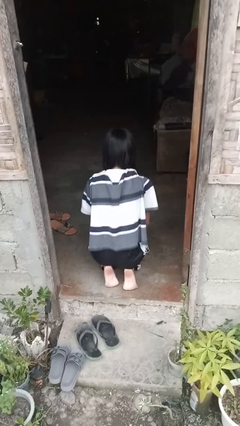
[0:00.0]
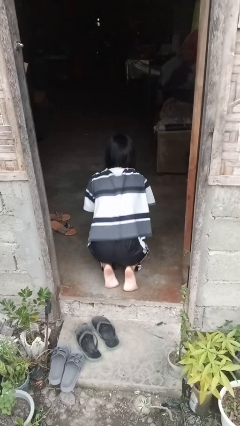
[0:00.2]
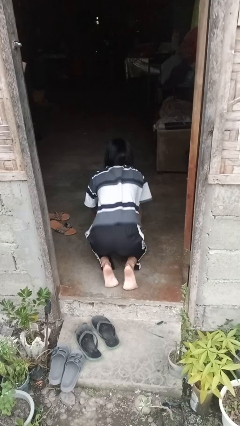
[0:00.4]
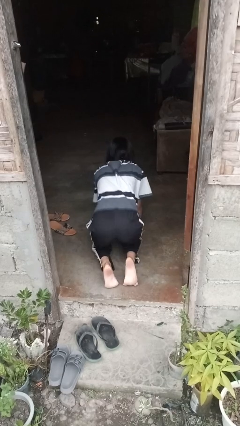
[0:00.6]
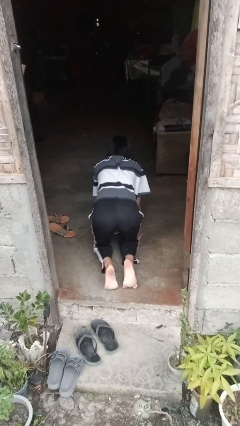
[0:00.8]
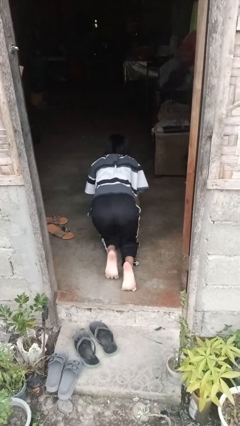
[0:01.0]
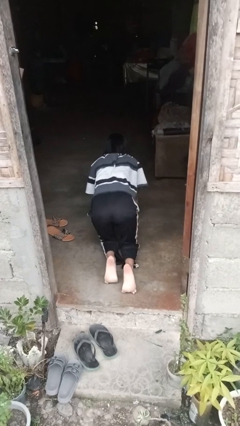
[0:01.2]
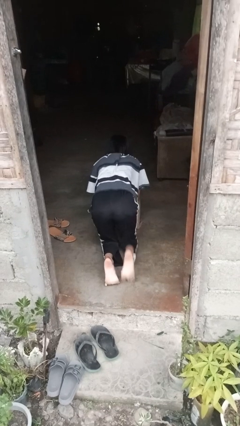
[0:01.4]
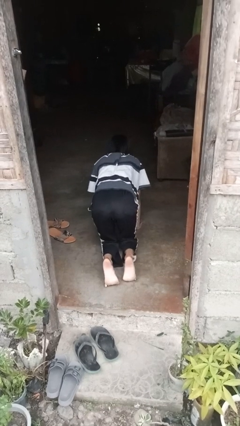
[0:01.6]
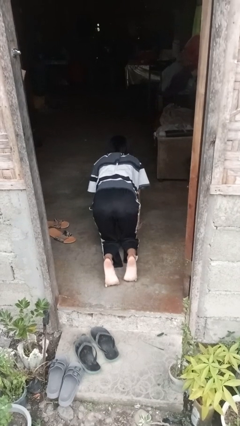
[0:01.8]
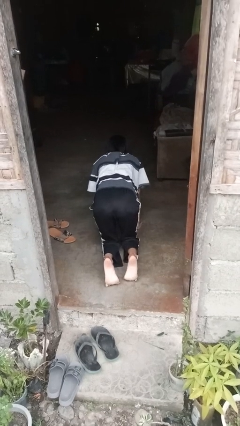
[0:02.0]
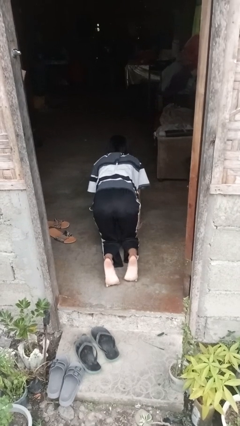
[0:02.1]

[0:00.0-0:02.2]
person crawls

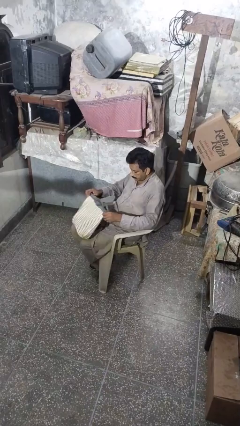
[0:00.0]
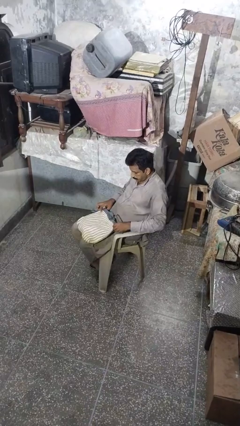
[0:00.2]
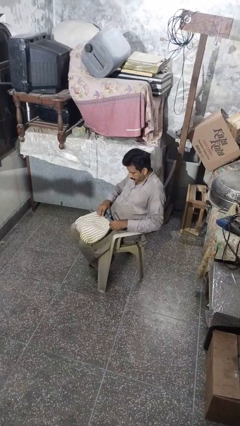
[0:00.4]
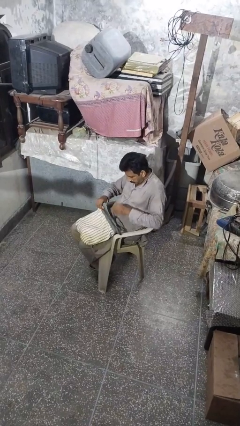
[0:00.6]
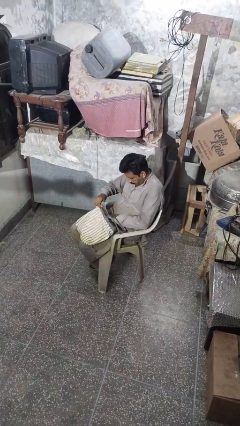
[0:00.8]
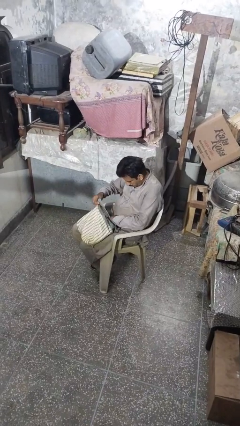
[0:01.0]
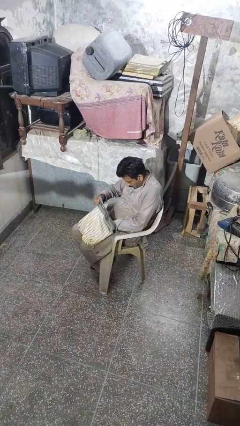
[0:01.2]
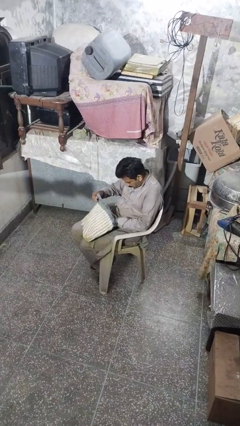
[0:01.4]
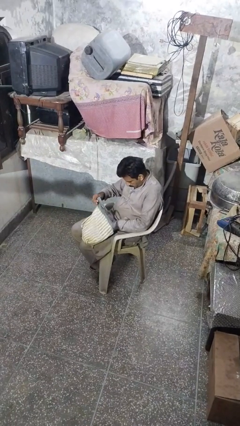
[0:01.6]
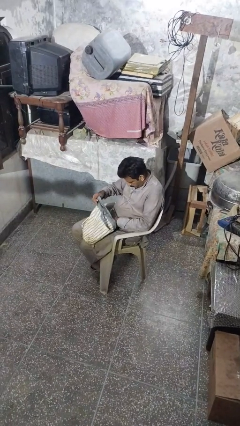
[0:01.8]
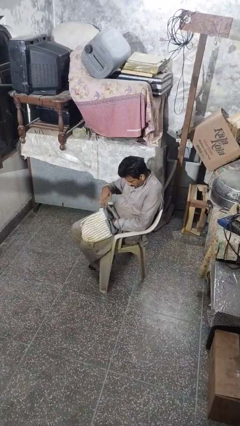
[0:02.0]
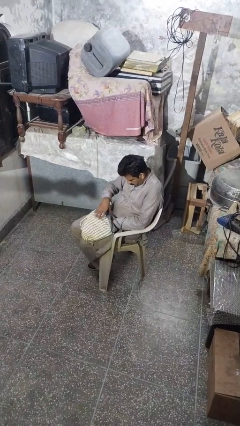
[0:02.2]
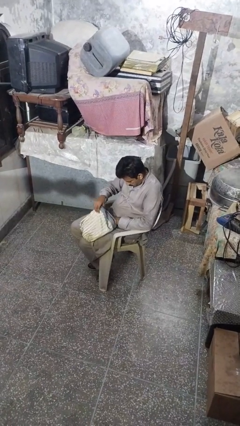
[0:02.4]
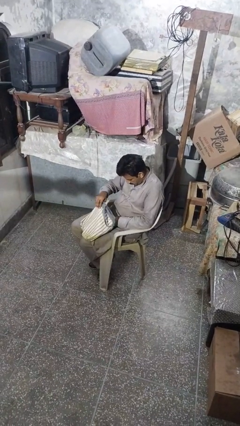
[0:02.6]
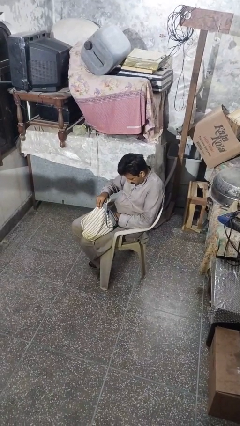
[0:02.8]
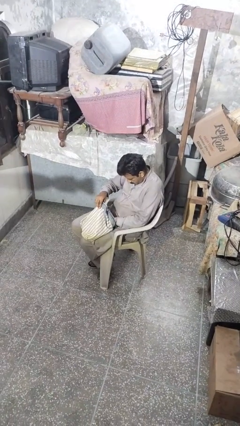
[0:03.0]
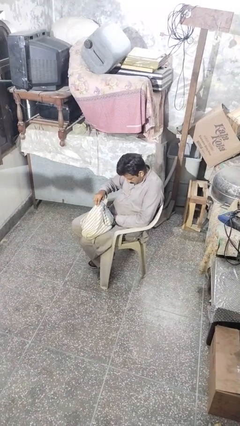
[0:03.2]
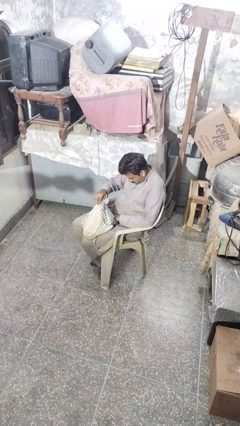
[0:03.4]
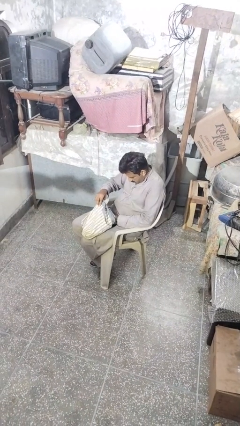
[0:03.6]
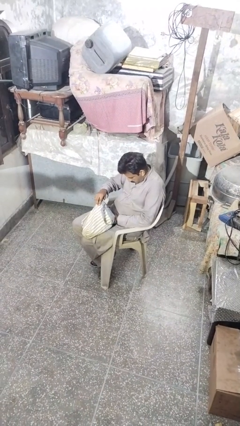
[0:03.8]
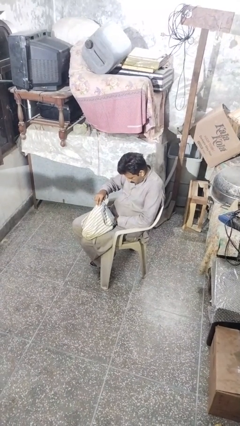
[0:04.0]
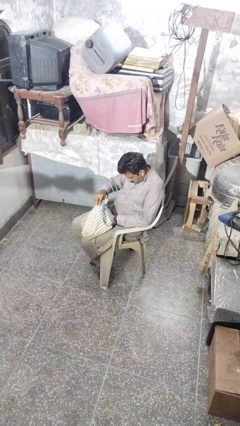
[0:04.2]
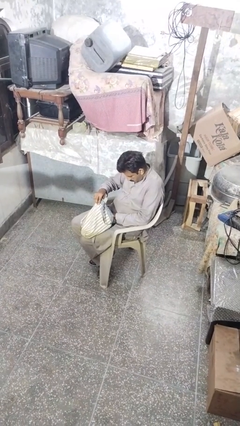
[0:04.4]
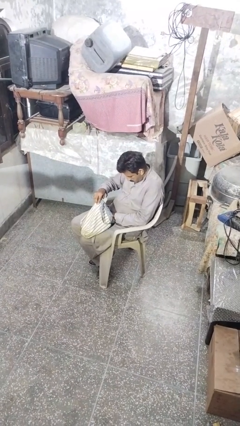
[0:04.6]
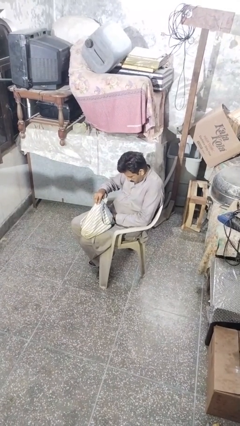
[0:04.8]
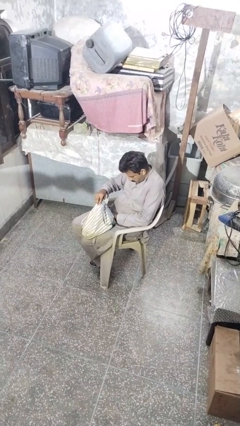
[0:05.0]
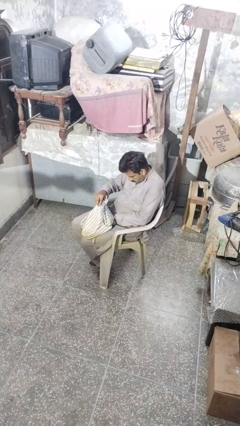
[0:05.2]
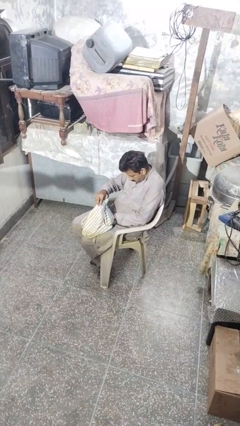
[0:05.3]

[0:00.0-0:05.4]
person searches in purse

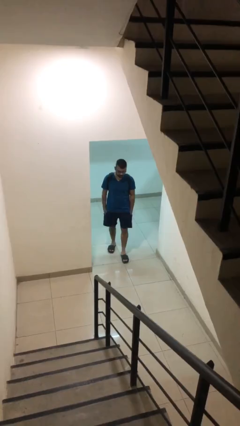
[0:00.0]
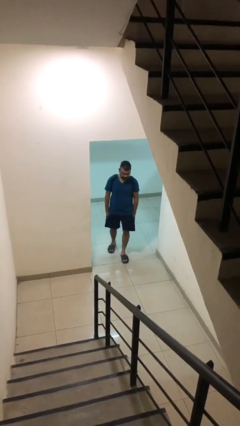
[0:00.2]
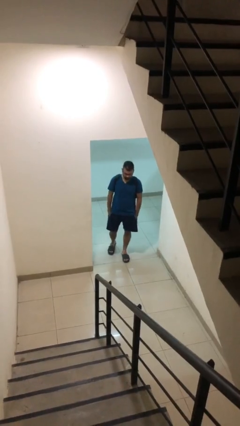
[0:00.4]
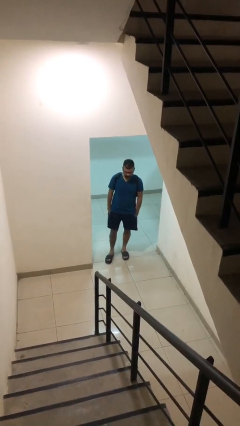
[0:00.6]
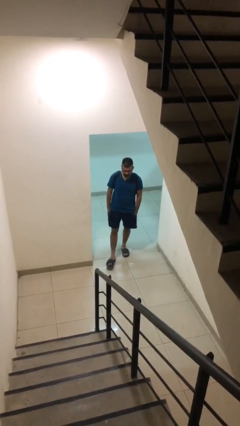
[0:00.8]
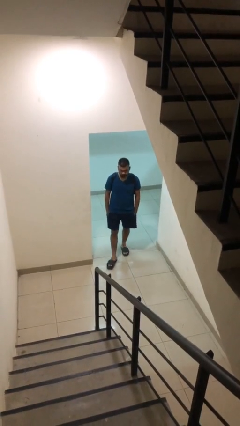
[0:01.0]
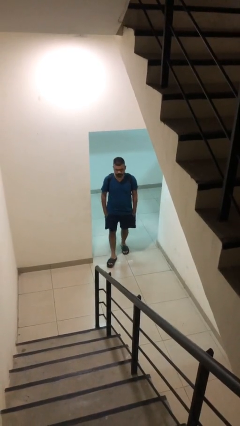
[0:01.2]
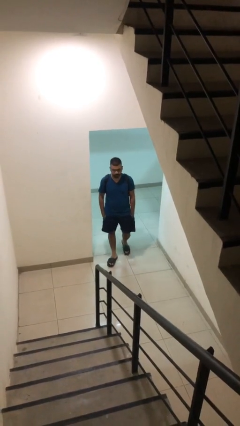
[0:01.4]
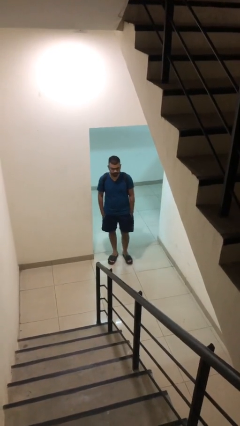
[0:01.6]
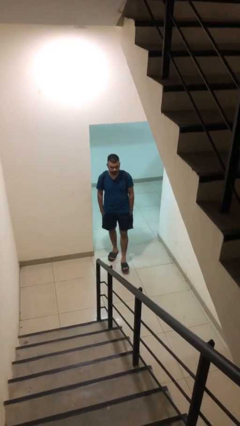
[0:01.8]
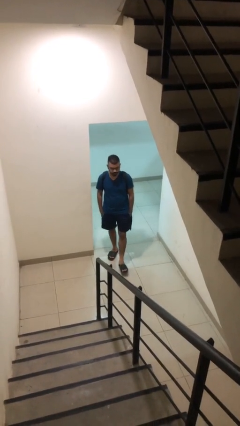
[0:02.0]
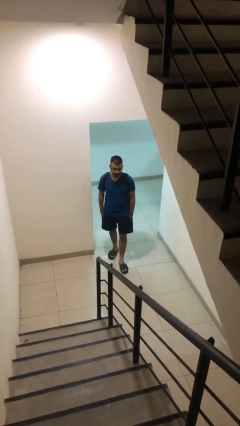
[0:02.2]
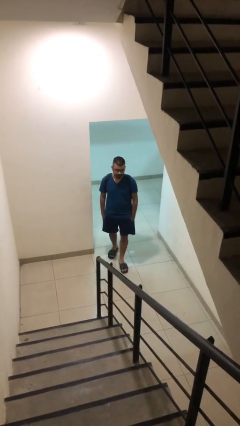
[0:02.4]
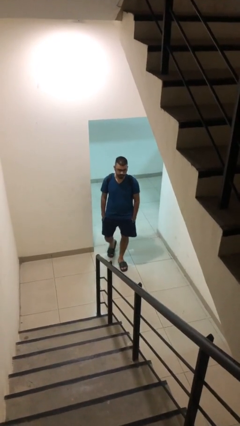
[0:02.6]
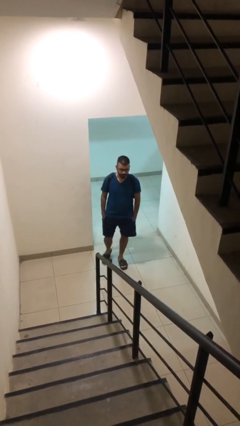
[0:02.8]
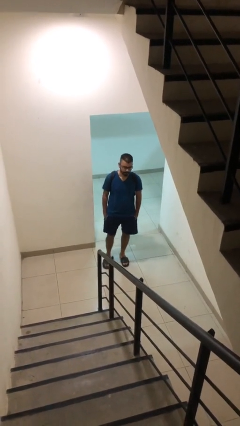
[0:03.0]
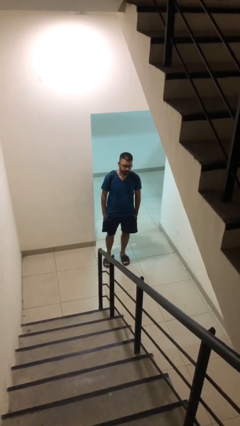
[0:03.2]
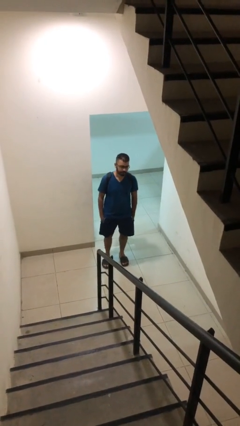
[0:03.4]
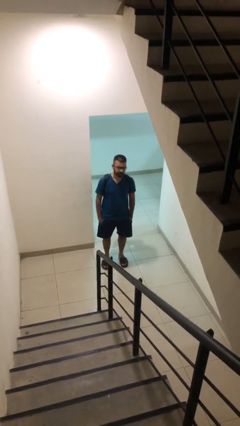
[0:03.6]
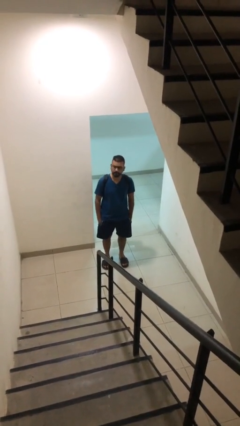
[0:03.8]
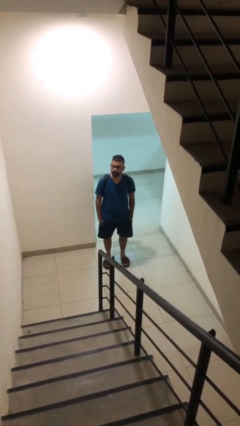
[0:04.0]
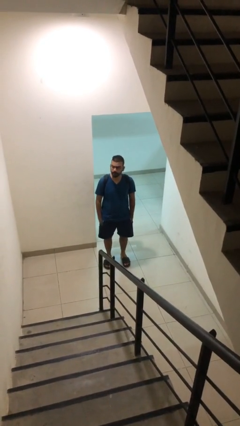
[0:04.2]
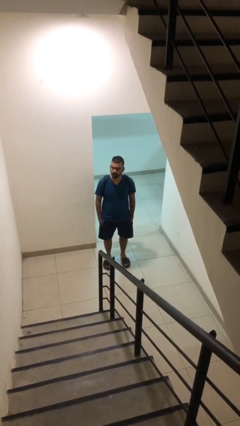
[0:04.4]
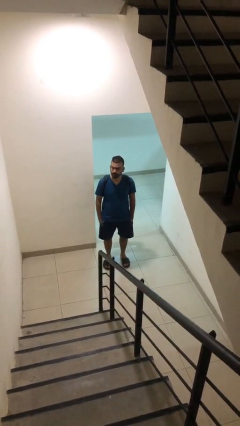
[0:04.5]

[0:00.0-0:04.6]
person enters scene through structure

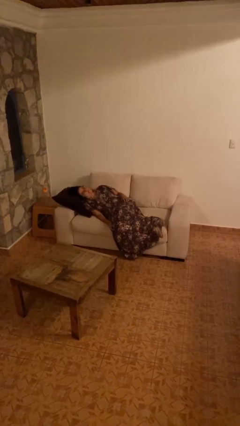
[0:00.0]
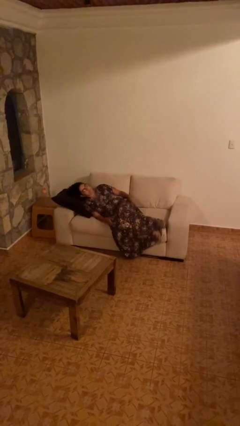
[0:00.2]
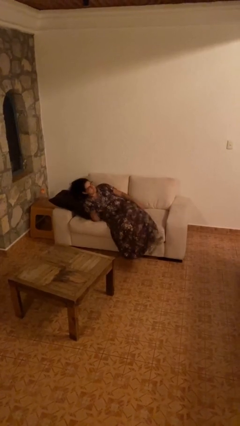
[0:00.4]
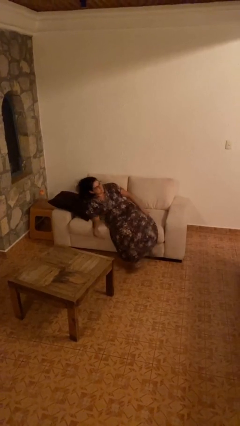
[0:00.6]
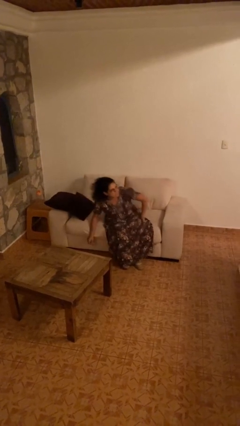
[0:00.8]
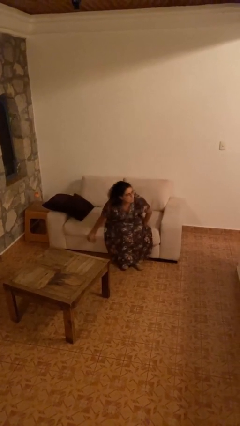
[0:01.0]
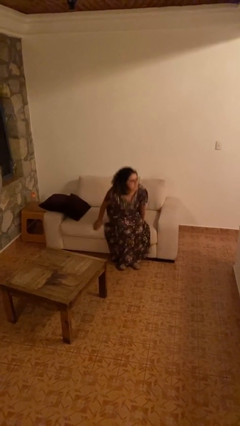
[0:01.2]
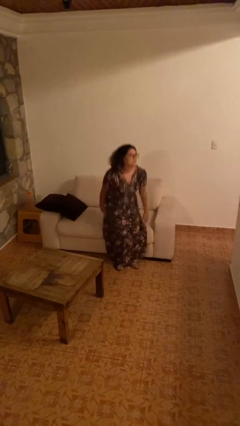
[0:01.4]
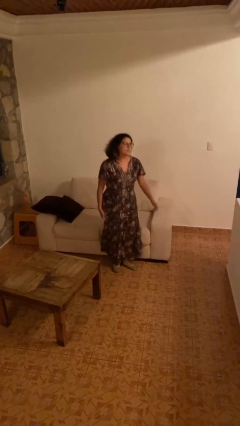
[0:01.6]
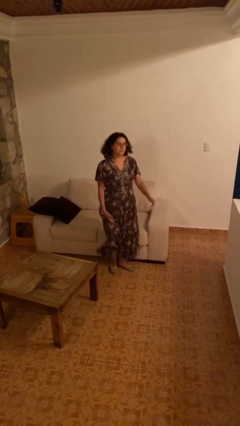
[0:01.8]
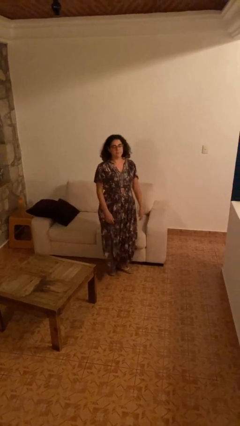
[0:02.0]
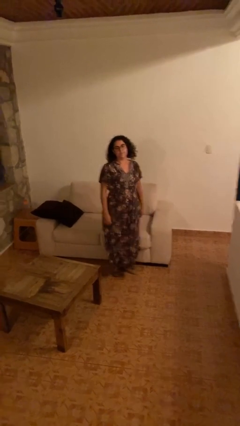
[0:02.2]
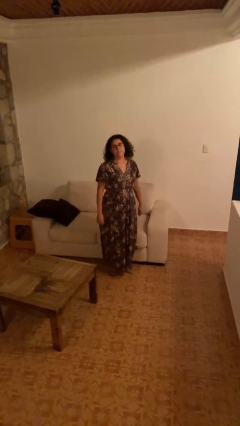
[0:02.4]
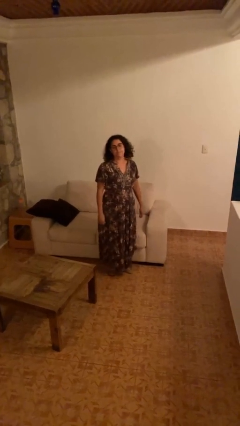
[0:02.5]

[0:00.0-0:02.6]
person stands up

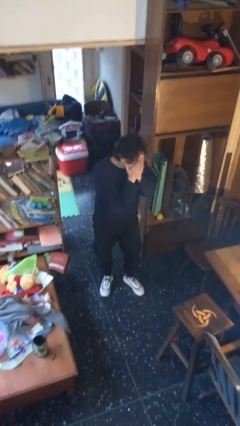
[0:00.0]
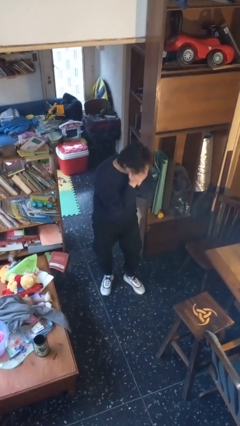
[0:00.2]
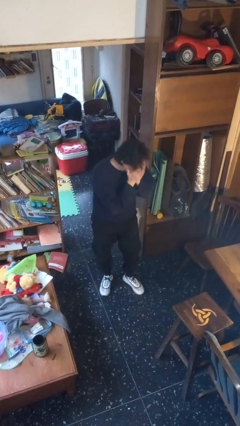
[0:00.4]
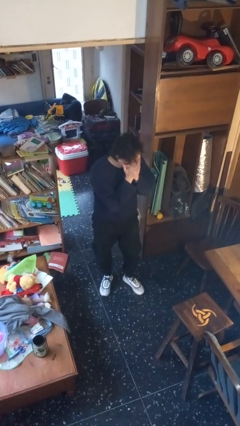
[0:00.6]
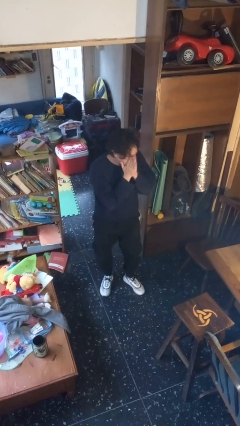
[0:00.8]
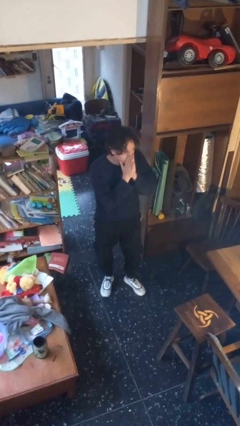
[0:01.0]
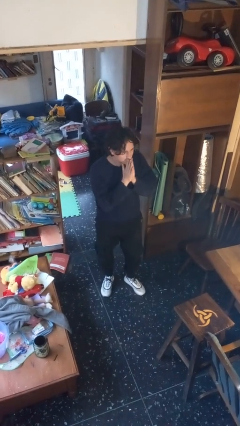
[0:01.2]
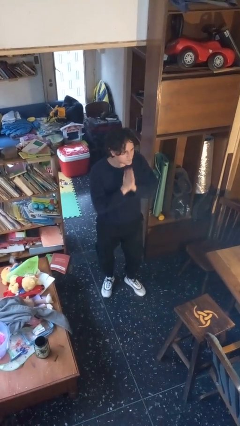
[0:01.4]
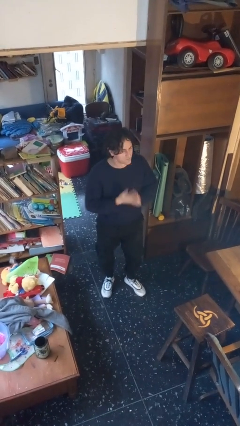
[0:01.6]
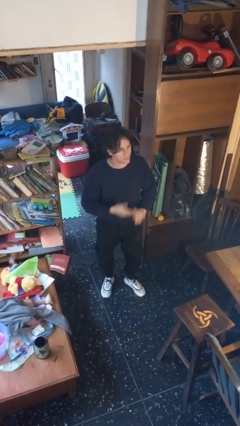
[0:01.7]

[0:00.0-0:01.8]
person sneezes into hand

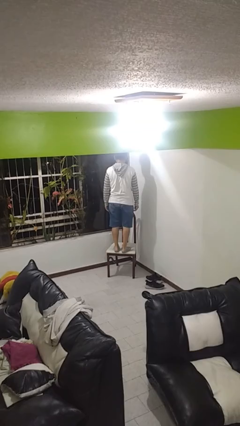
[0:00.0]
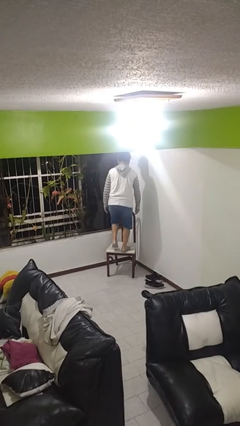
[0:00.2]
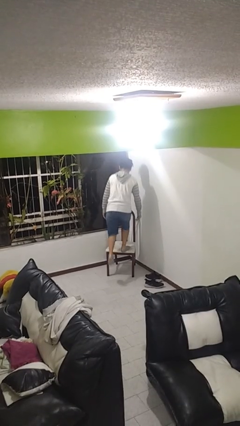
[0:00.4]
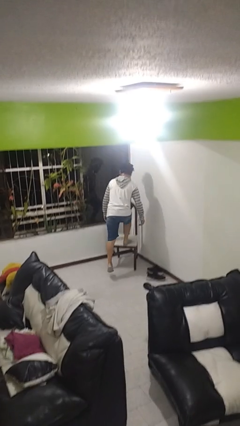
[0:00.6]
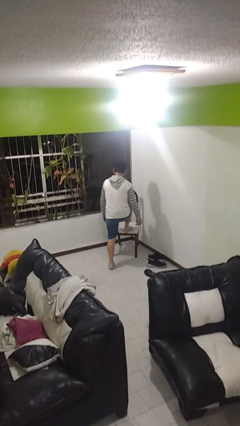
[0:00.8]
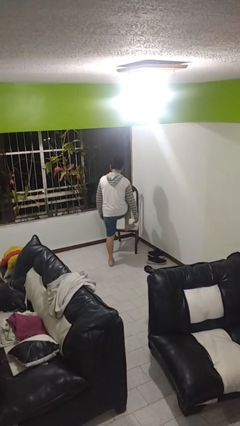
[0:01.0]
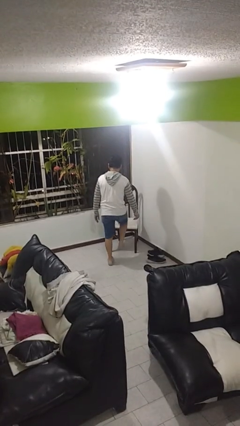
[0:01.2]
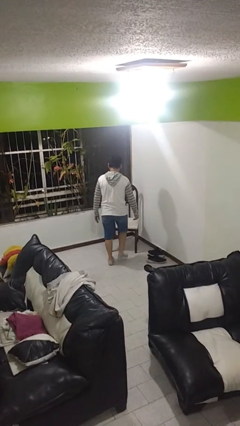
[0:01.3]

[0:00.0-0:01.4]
person climbs off chair
